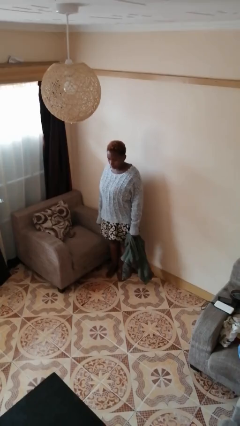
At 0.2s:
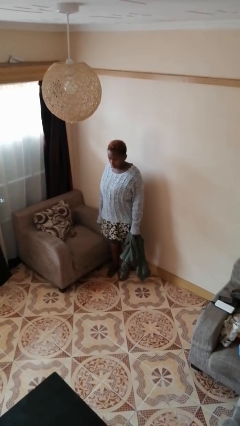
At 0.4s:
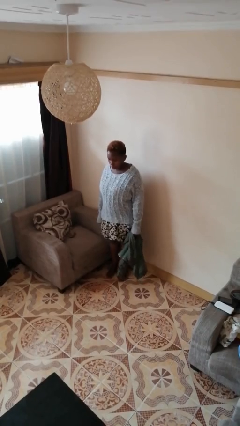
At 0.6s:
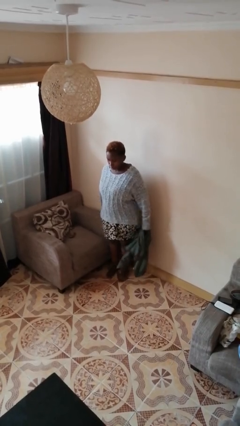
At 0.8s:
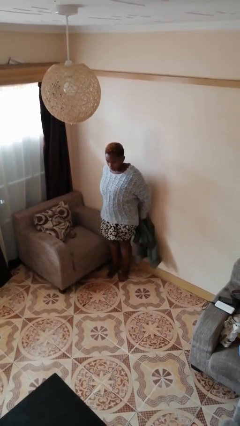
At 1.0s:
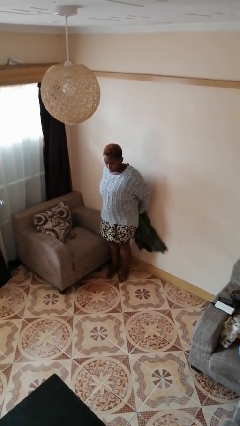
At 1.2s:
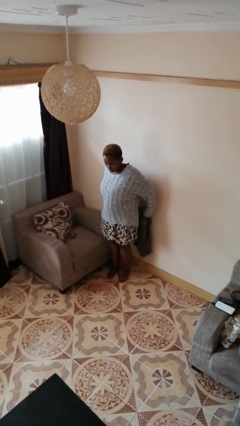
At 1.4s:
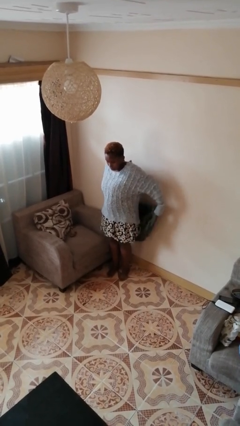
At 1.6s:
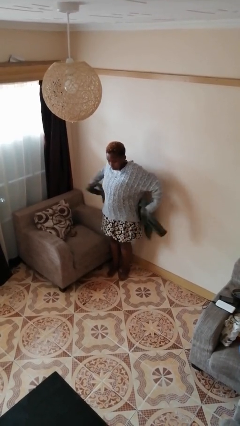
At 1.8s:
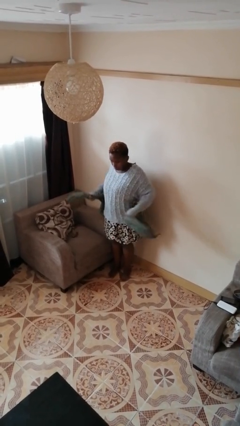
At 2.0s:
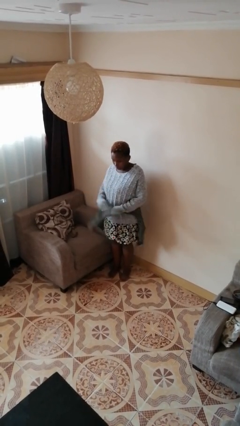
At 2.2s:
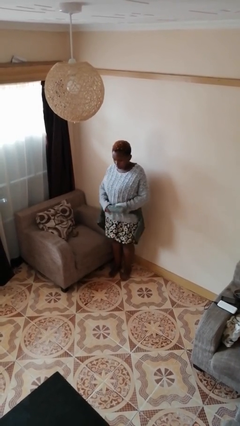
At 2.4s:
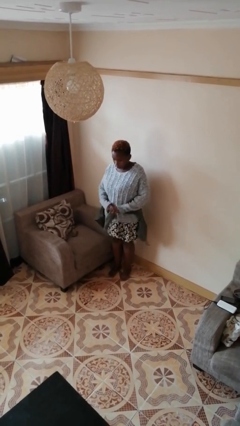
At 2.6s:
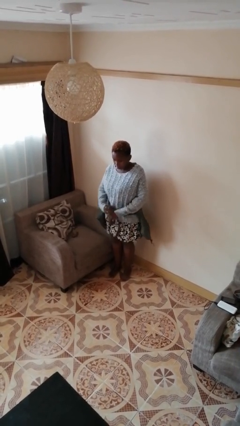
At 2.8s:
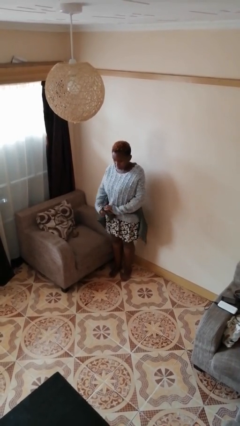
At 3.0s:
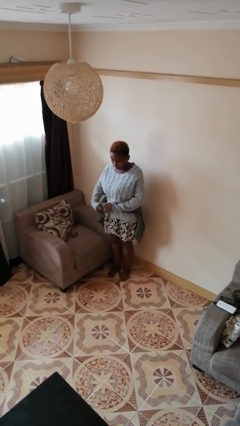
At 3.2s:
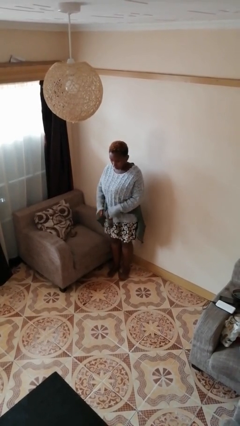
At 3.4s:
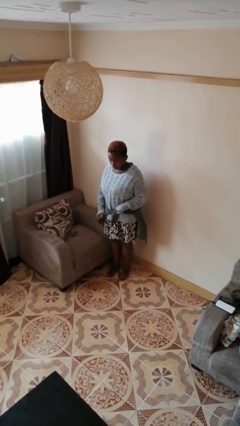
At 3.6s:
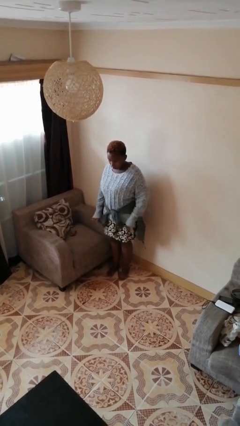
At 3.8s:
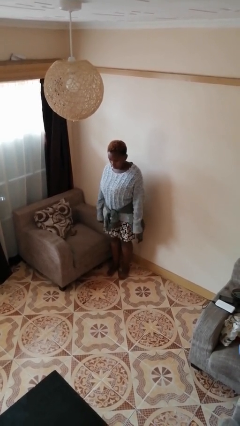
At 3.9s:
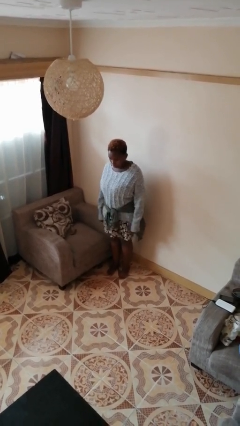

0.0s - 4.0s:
person ties jacket around waist

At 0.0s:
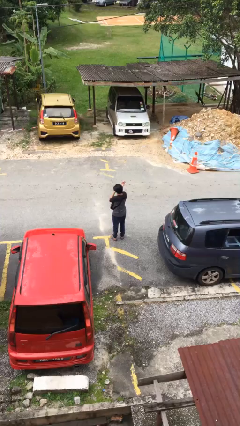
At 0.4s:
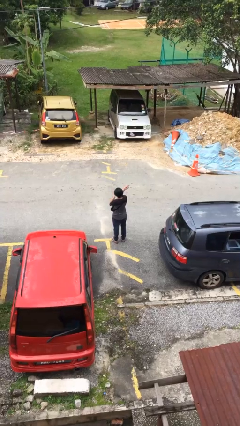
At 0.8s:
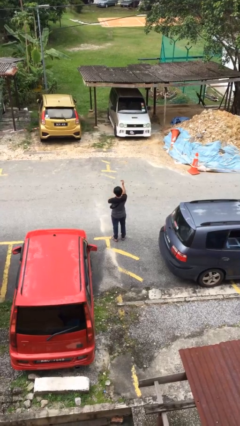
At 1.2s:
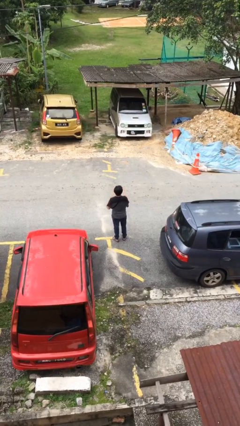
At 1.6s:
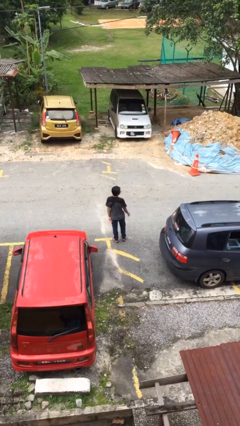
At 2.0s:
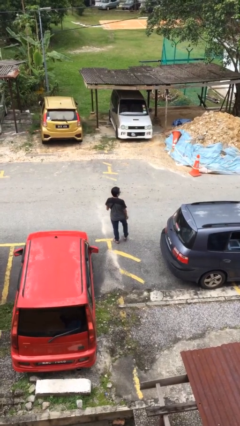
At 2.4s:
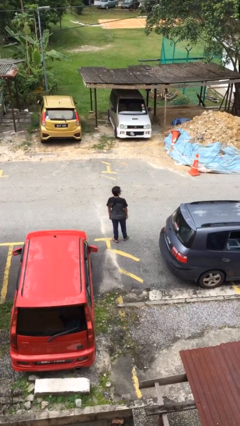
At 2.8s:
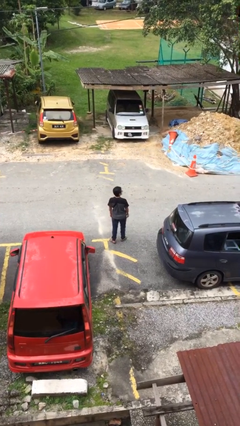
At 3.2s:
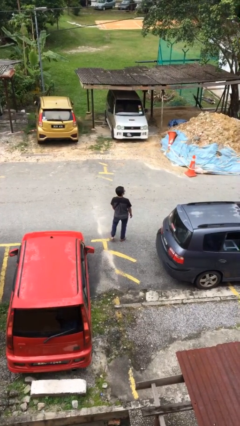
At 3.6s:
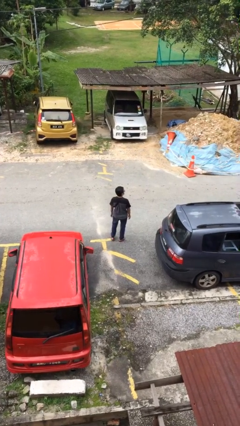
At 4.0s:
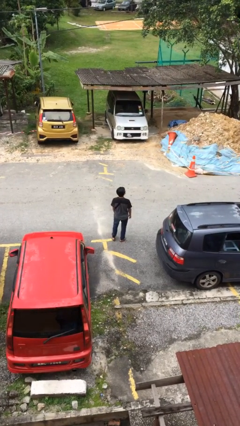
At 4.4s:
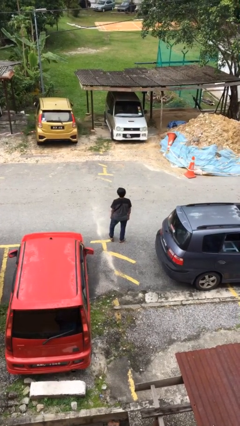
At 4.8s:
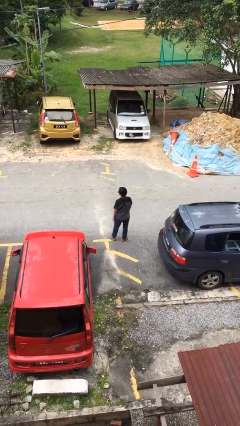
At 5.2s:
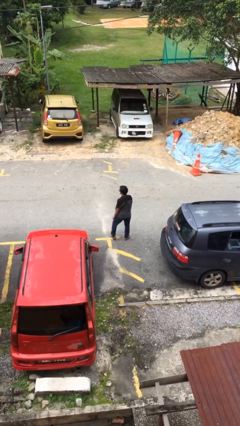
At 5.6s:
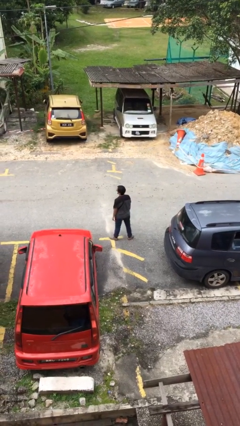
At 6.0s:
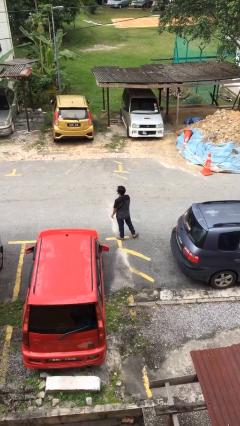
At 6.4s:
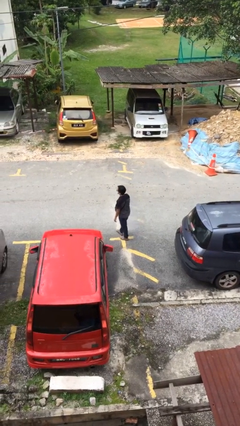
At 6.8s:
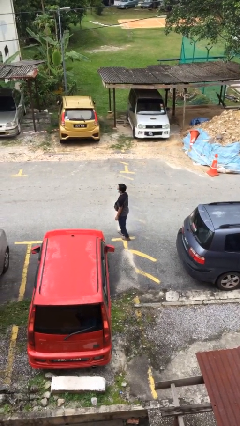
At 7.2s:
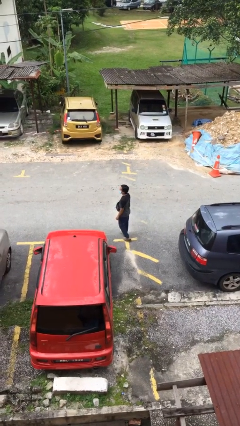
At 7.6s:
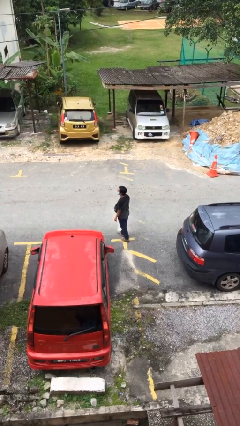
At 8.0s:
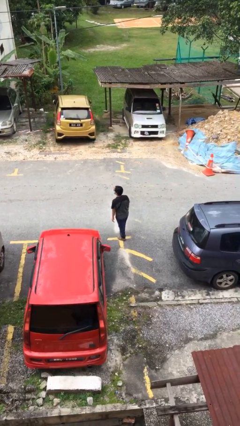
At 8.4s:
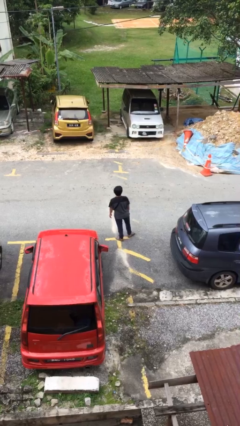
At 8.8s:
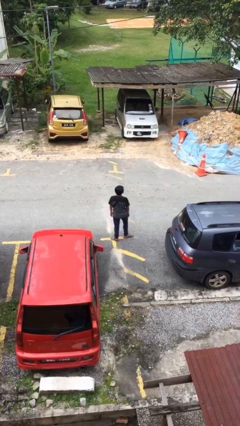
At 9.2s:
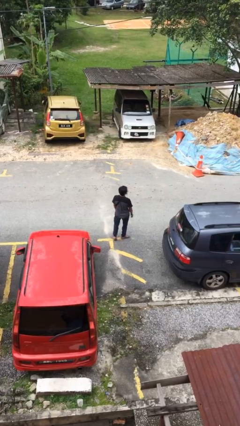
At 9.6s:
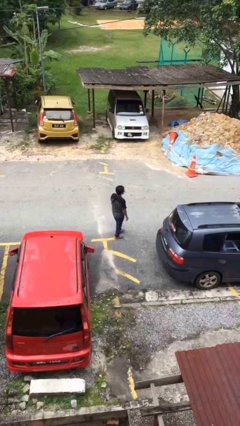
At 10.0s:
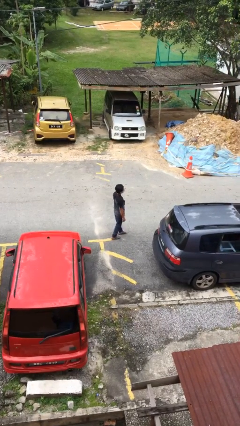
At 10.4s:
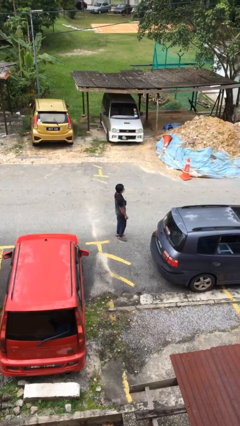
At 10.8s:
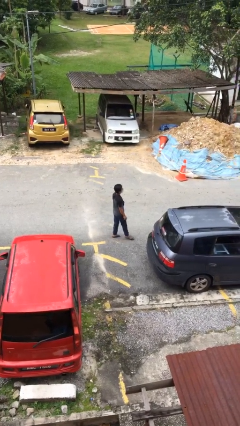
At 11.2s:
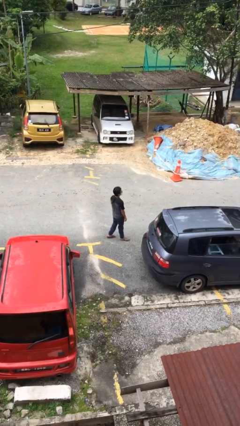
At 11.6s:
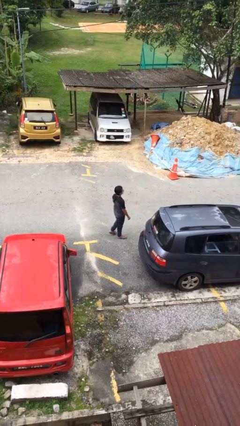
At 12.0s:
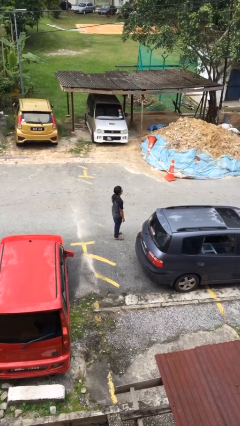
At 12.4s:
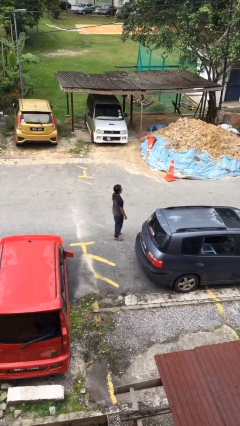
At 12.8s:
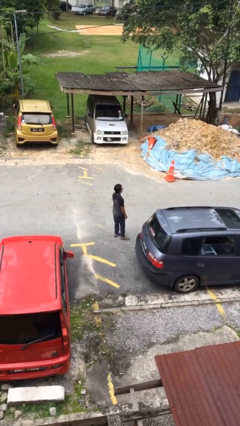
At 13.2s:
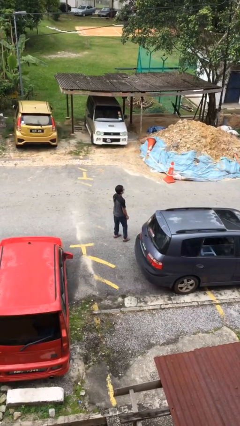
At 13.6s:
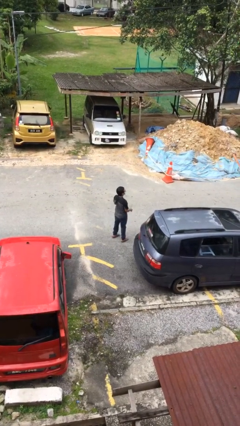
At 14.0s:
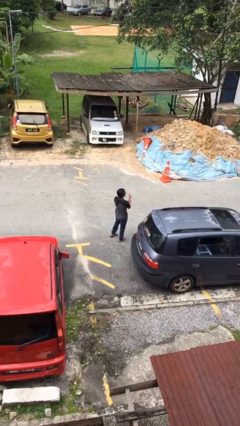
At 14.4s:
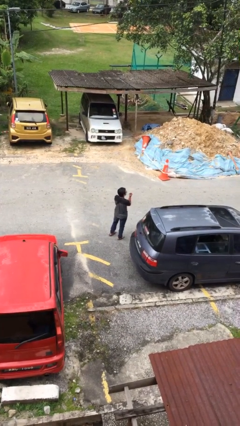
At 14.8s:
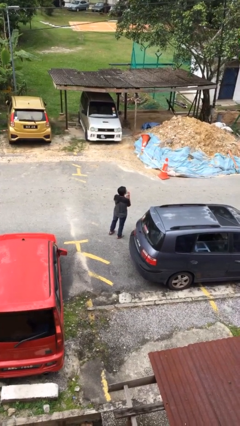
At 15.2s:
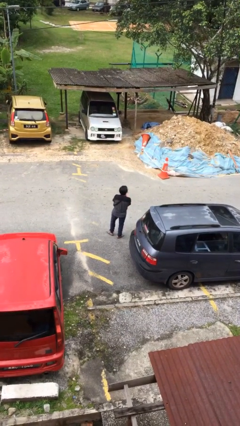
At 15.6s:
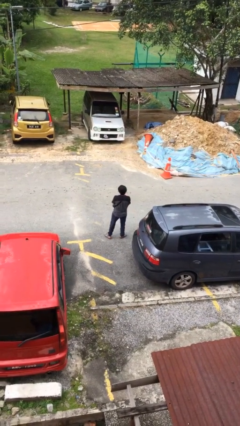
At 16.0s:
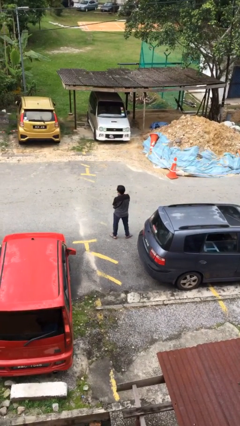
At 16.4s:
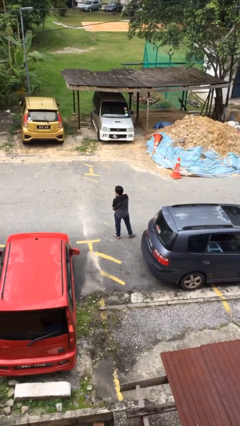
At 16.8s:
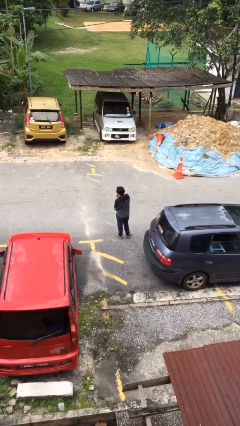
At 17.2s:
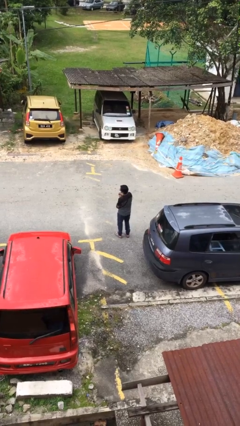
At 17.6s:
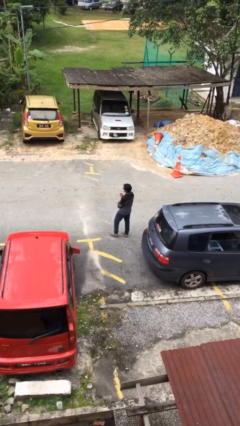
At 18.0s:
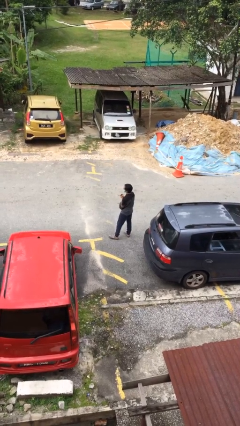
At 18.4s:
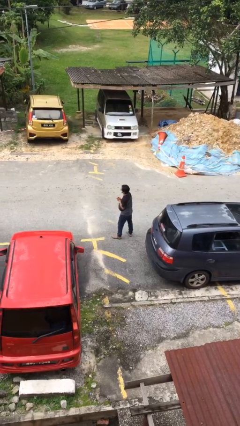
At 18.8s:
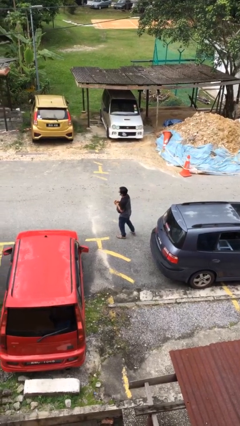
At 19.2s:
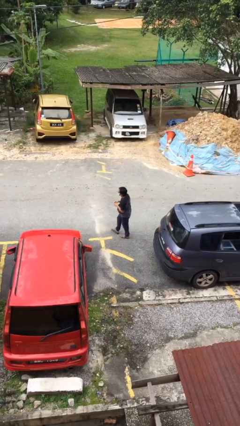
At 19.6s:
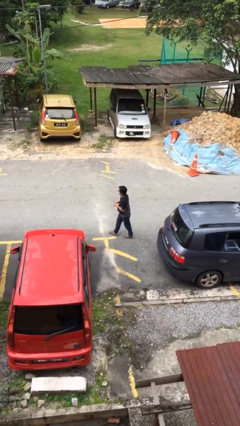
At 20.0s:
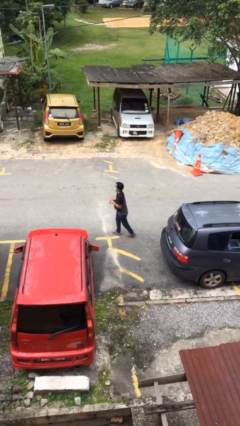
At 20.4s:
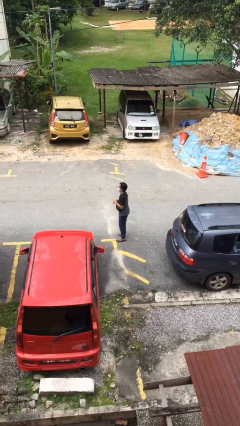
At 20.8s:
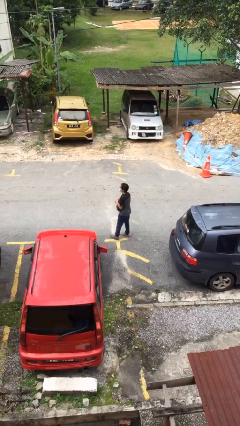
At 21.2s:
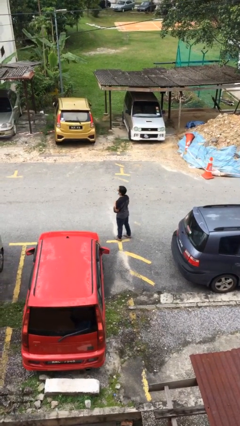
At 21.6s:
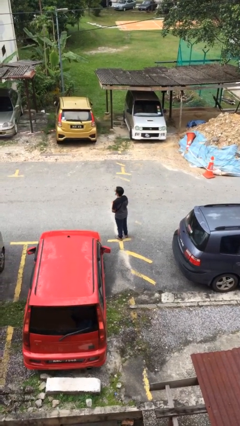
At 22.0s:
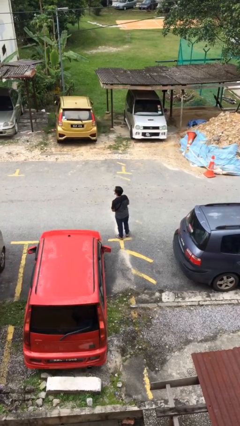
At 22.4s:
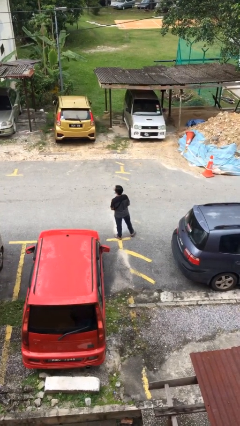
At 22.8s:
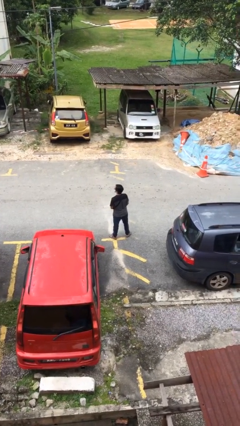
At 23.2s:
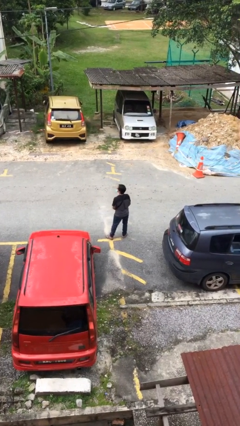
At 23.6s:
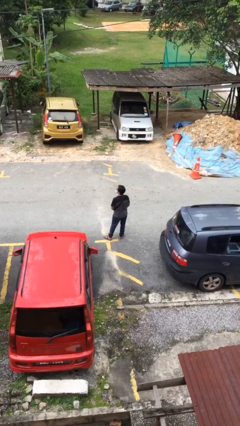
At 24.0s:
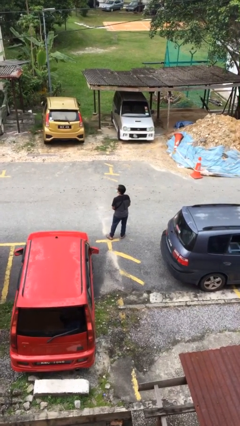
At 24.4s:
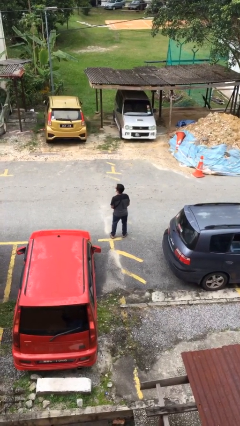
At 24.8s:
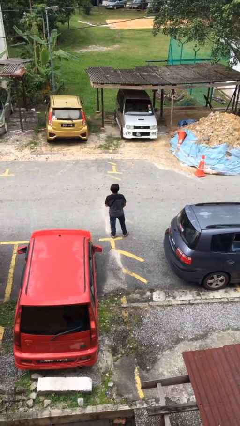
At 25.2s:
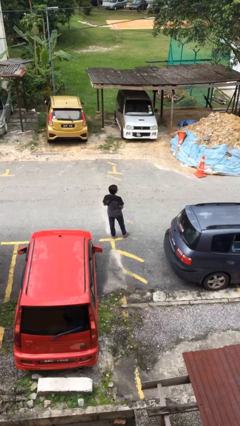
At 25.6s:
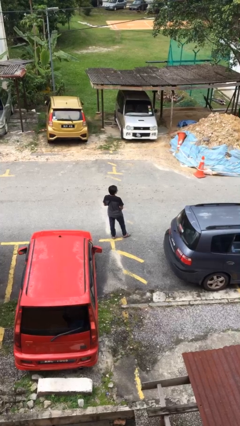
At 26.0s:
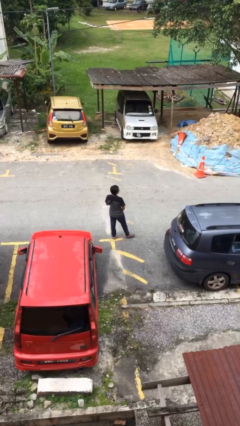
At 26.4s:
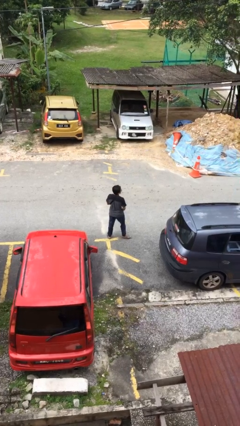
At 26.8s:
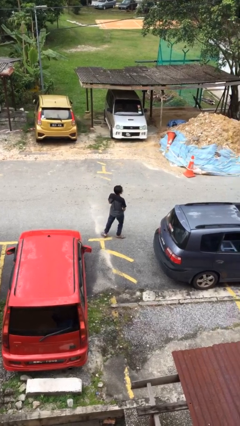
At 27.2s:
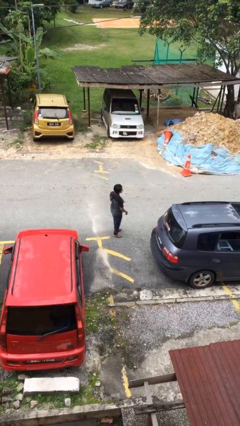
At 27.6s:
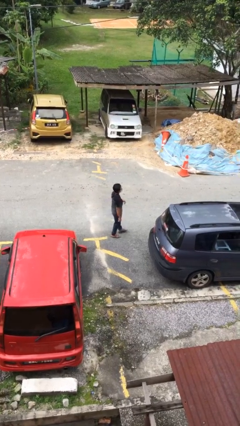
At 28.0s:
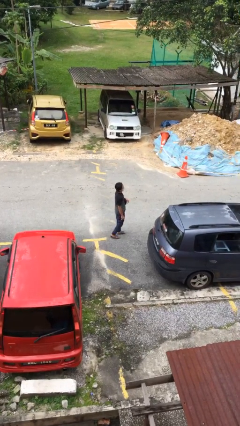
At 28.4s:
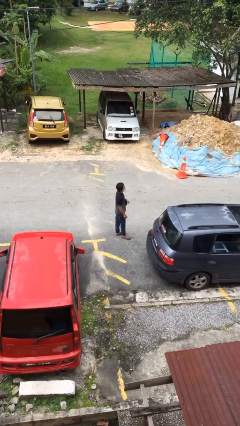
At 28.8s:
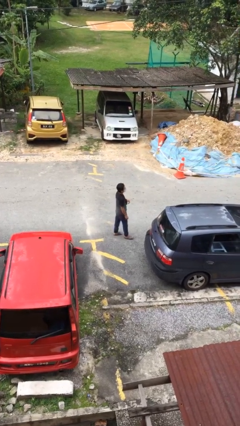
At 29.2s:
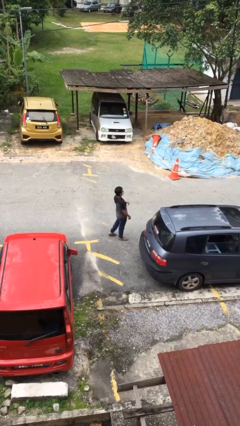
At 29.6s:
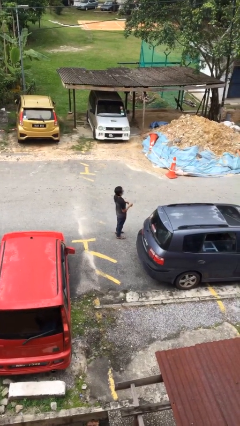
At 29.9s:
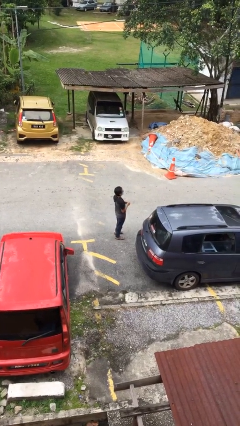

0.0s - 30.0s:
person walks
